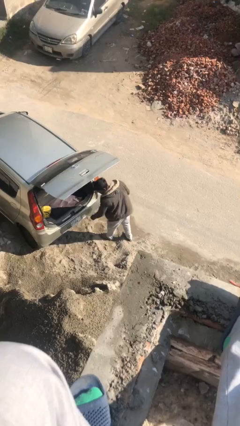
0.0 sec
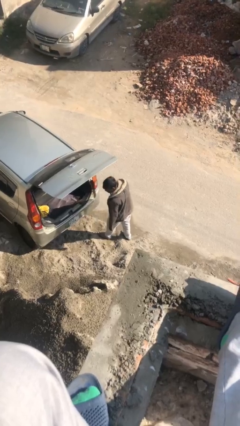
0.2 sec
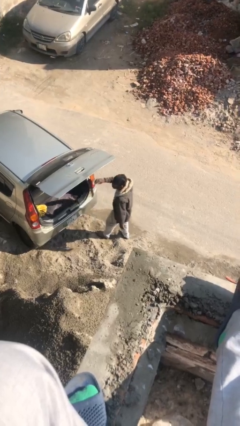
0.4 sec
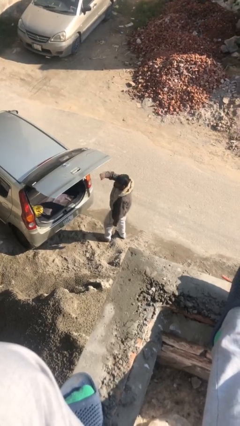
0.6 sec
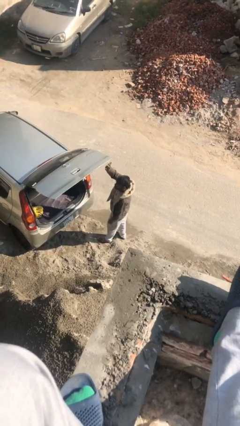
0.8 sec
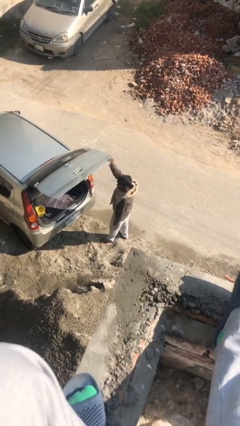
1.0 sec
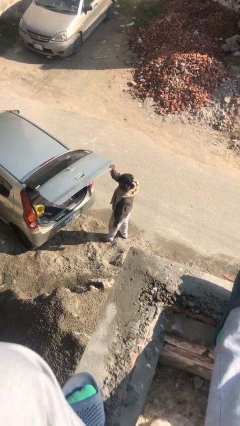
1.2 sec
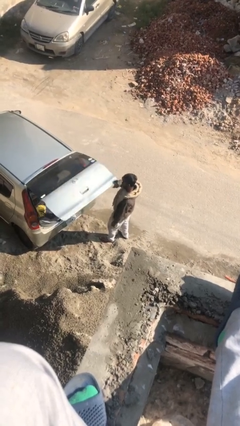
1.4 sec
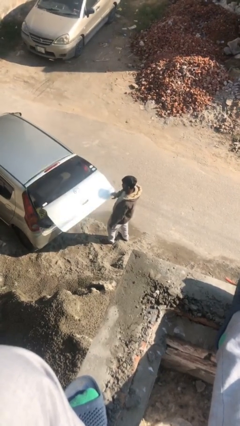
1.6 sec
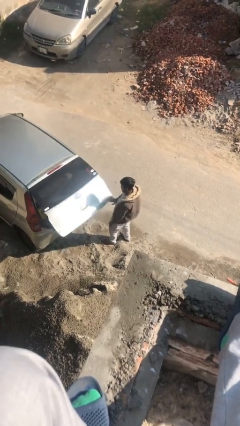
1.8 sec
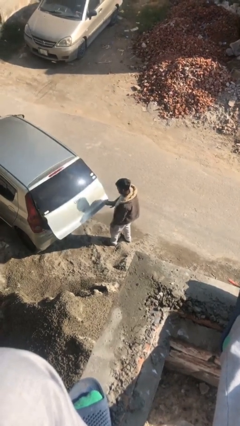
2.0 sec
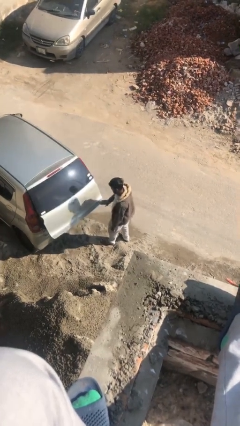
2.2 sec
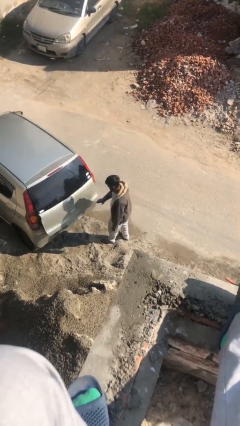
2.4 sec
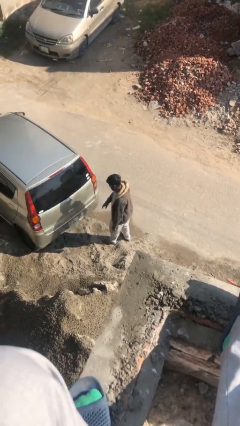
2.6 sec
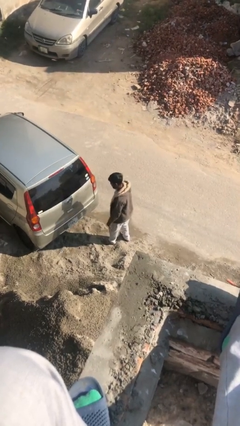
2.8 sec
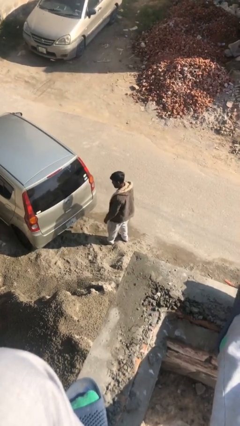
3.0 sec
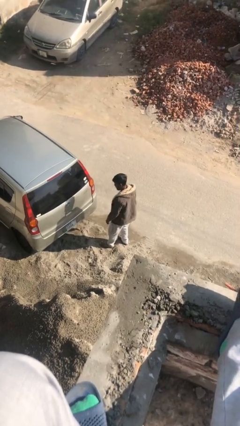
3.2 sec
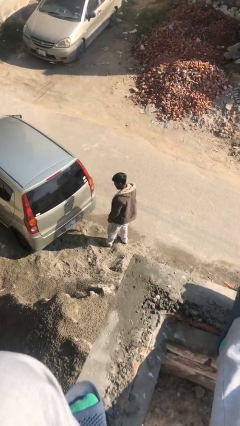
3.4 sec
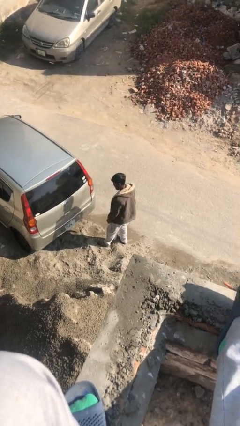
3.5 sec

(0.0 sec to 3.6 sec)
person closes car trunk

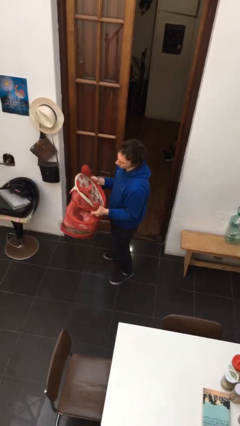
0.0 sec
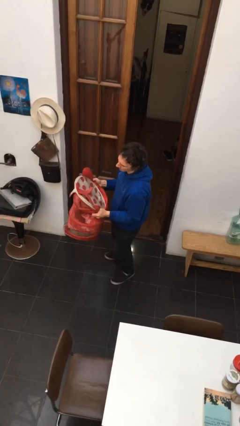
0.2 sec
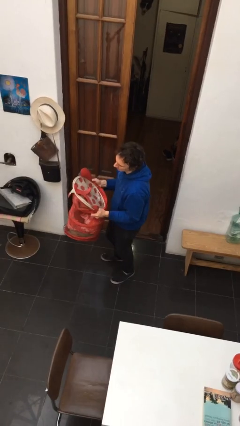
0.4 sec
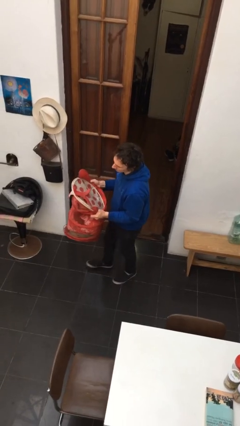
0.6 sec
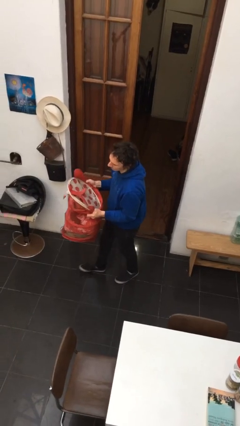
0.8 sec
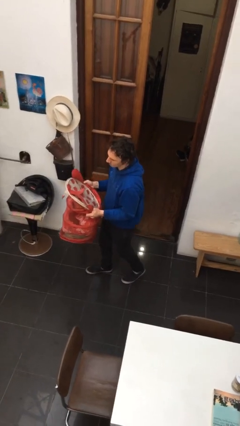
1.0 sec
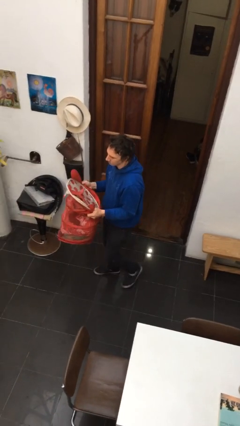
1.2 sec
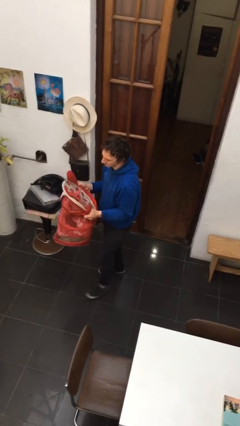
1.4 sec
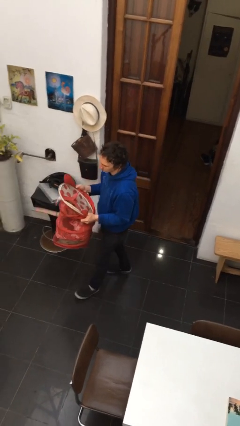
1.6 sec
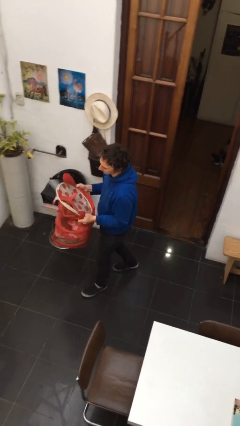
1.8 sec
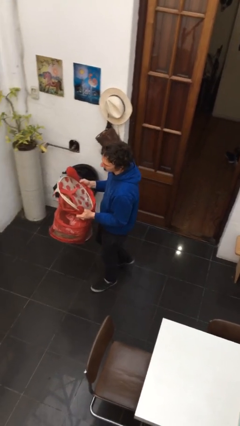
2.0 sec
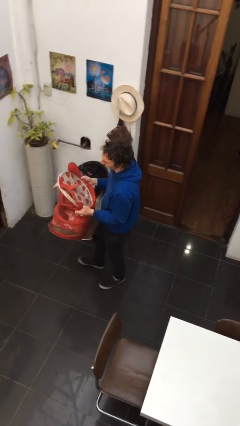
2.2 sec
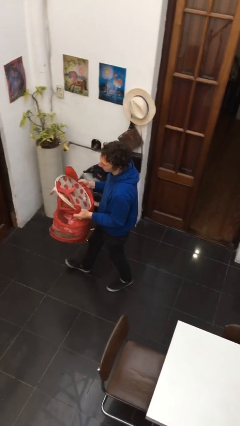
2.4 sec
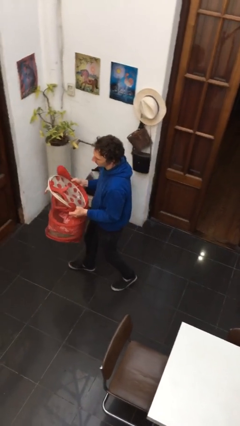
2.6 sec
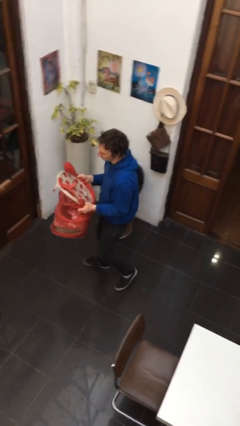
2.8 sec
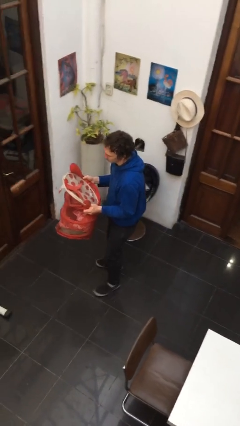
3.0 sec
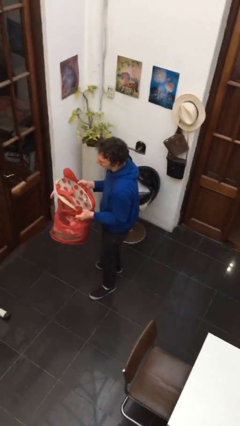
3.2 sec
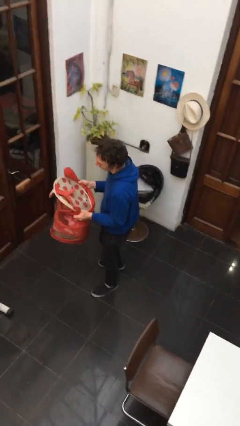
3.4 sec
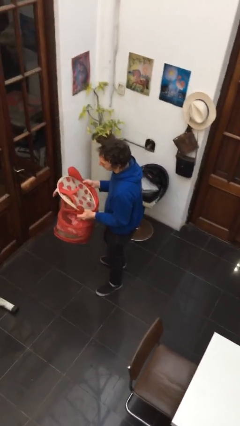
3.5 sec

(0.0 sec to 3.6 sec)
person carries heavy object

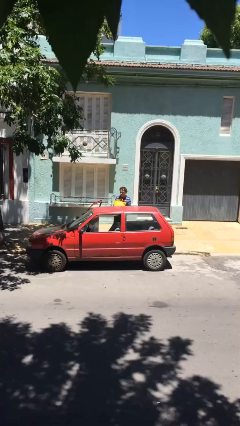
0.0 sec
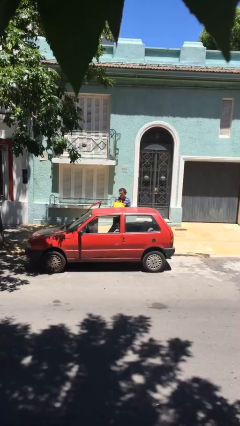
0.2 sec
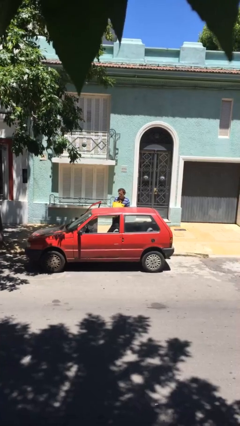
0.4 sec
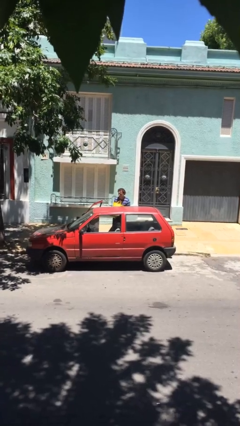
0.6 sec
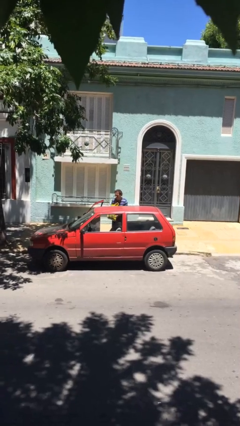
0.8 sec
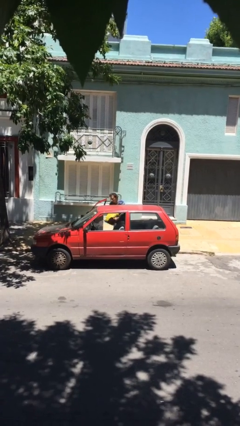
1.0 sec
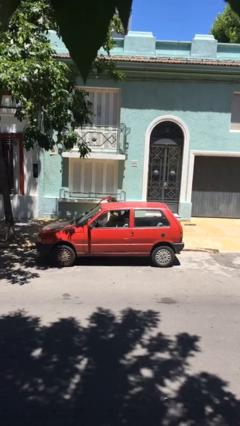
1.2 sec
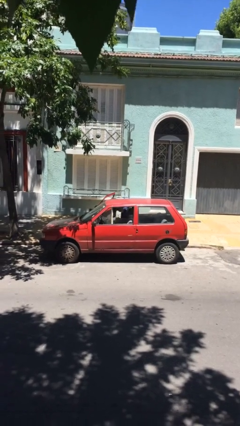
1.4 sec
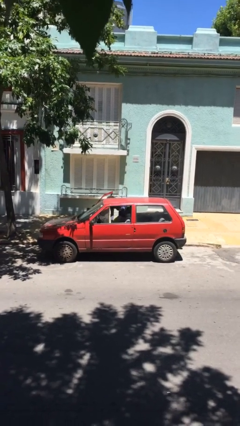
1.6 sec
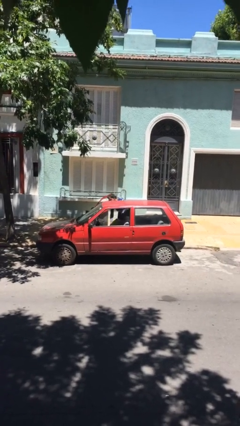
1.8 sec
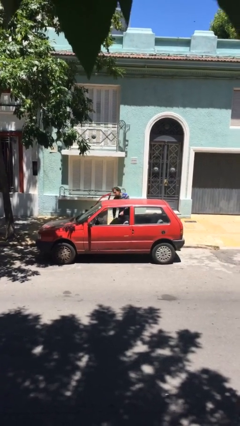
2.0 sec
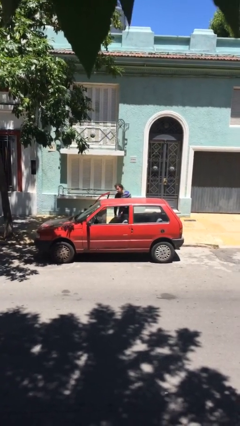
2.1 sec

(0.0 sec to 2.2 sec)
person loads car

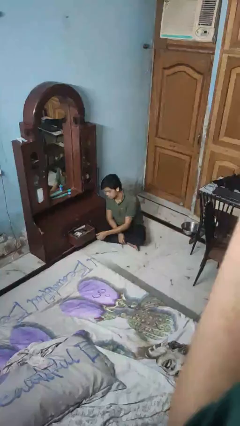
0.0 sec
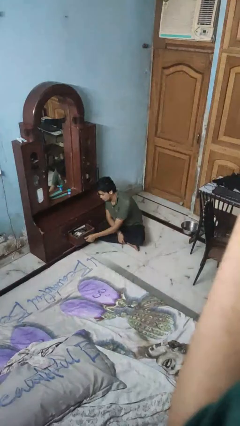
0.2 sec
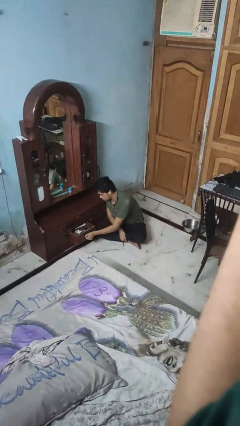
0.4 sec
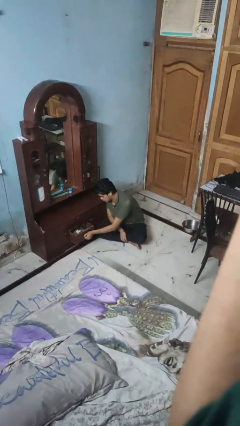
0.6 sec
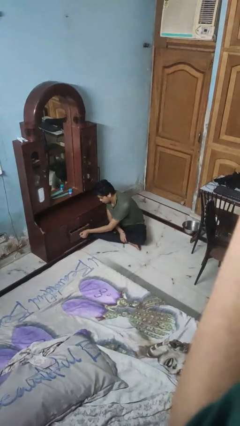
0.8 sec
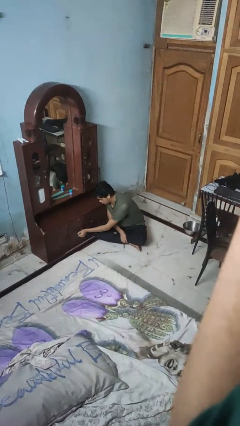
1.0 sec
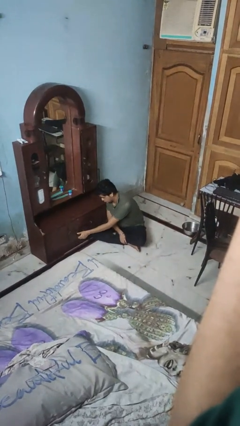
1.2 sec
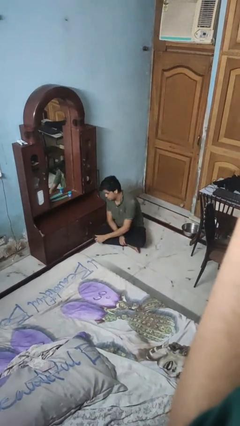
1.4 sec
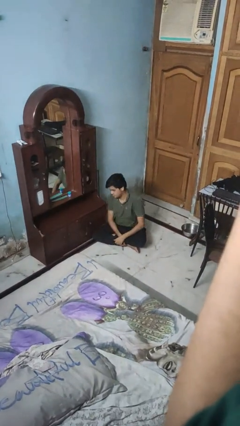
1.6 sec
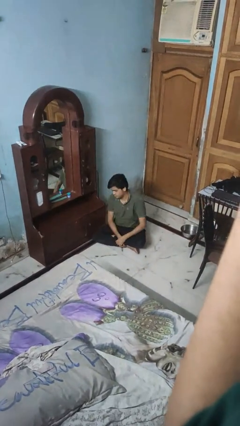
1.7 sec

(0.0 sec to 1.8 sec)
person closes dresser drawer

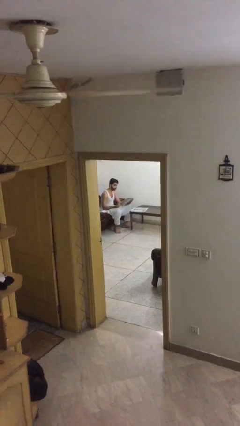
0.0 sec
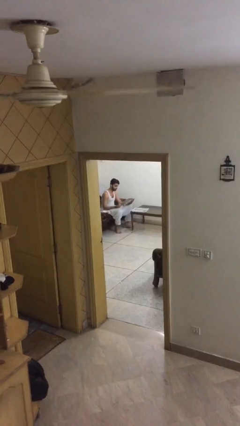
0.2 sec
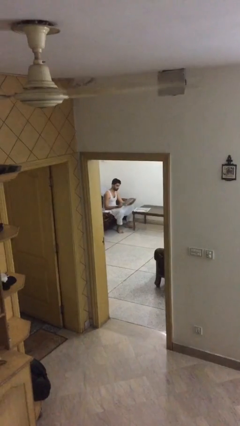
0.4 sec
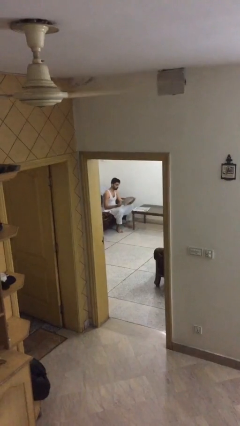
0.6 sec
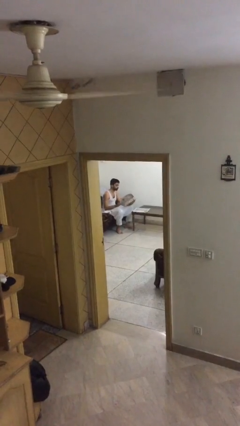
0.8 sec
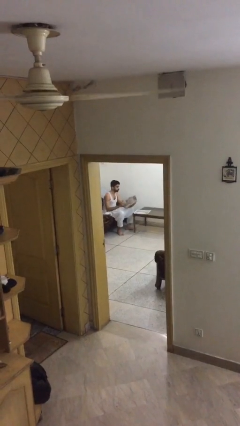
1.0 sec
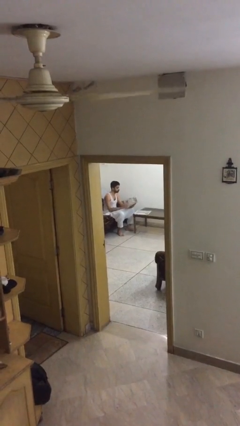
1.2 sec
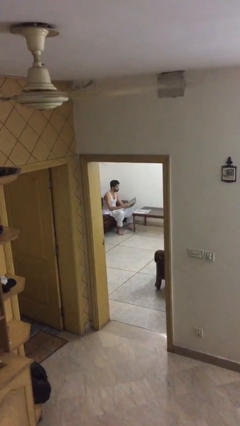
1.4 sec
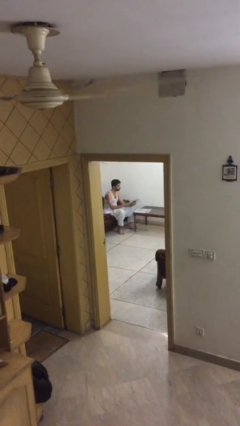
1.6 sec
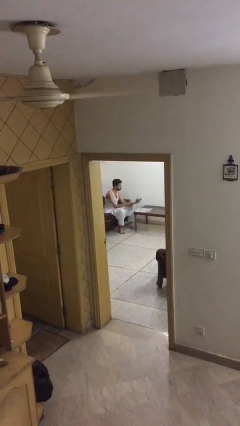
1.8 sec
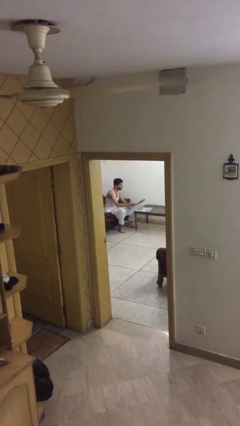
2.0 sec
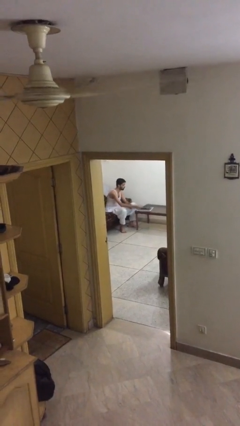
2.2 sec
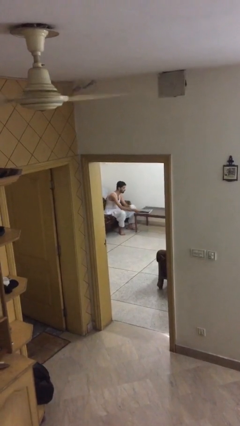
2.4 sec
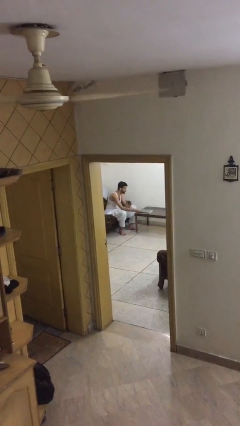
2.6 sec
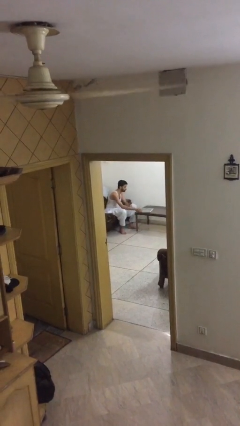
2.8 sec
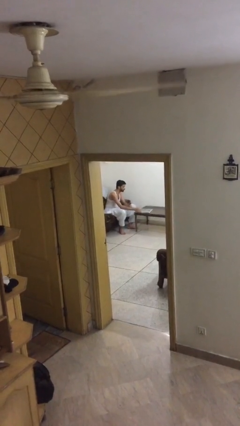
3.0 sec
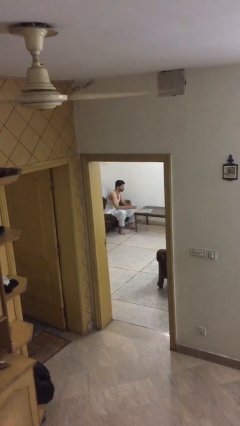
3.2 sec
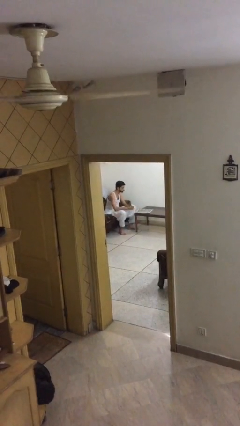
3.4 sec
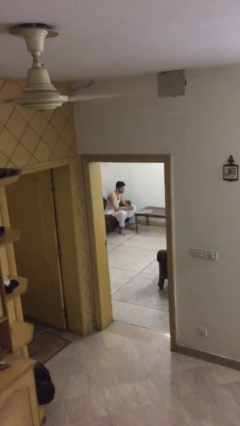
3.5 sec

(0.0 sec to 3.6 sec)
person puts down object on table

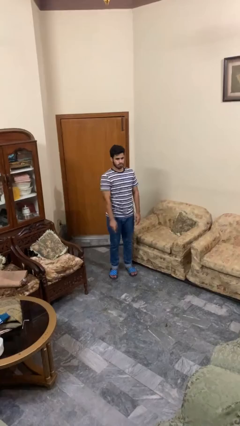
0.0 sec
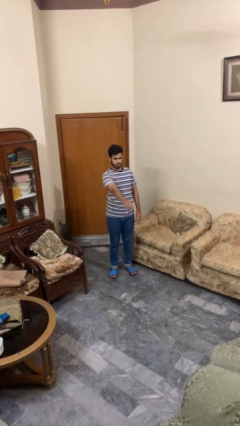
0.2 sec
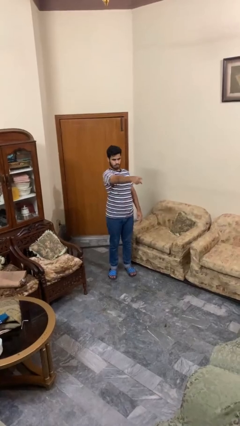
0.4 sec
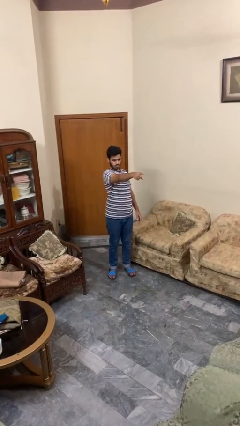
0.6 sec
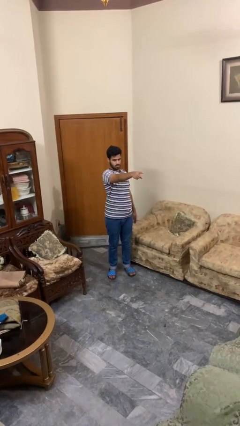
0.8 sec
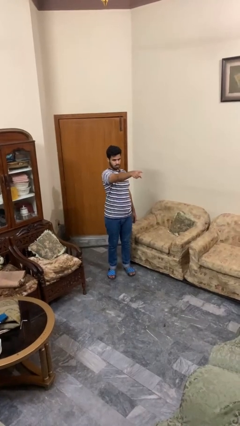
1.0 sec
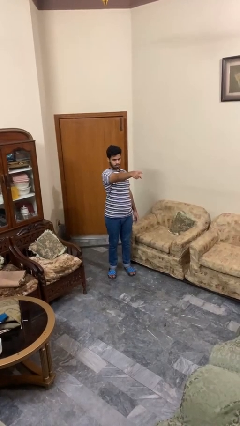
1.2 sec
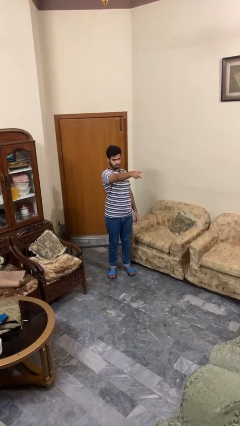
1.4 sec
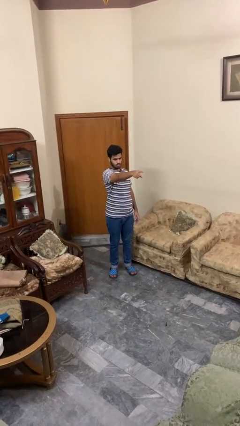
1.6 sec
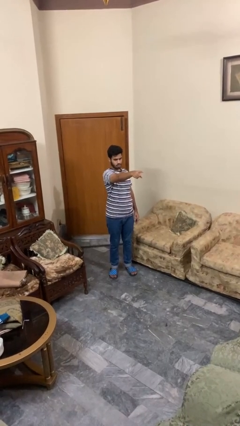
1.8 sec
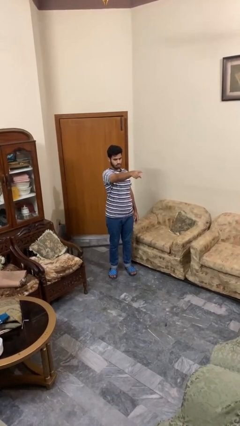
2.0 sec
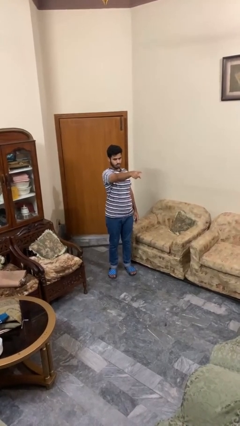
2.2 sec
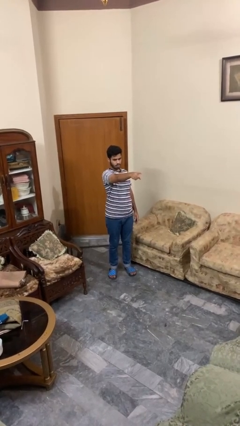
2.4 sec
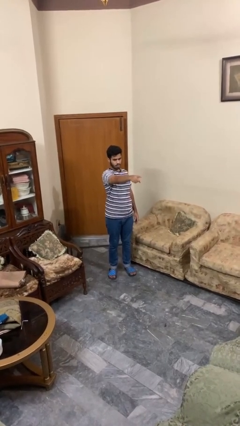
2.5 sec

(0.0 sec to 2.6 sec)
person points at person
